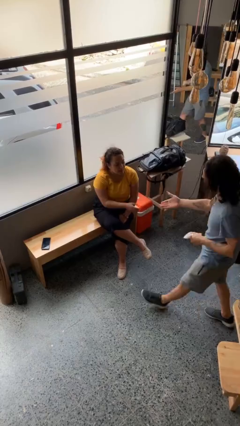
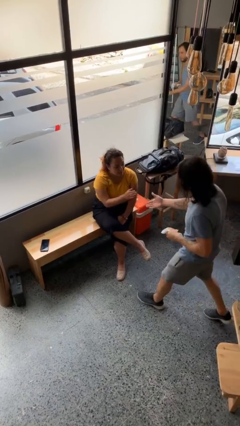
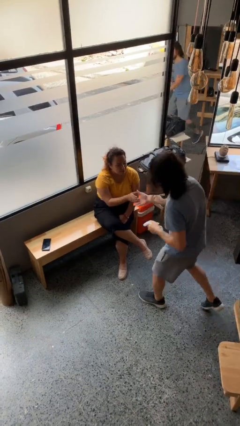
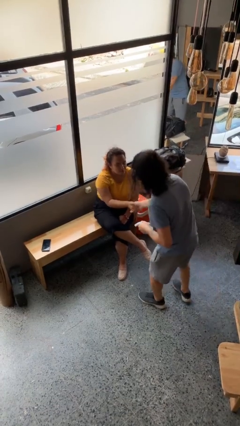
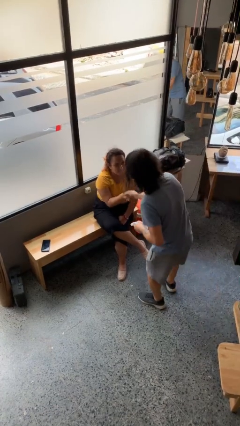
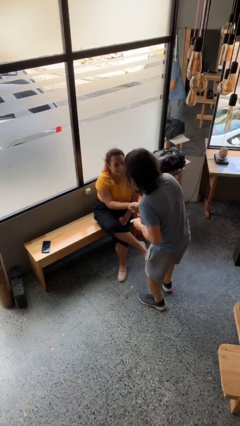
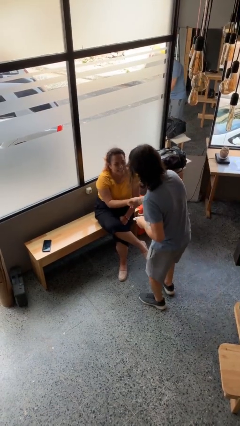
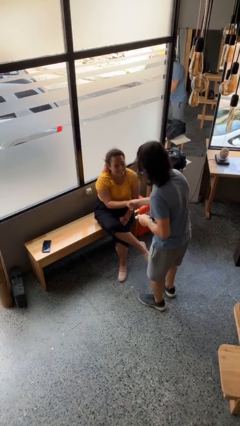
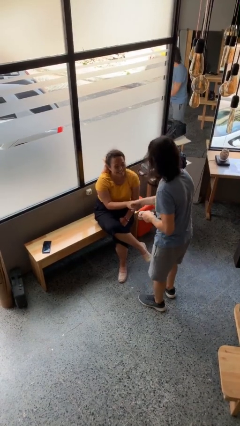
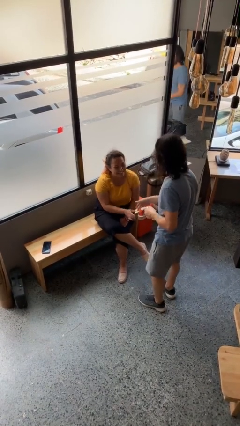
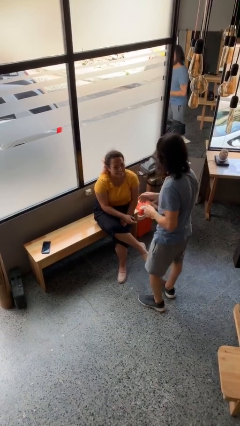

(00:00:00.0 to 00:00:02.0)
person shakes hand

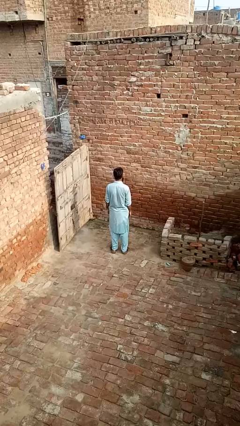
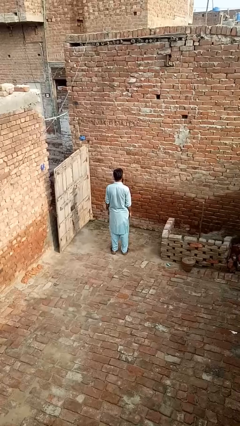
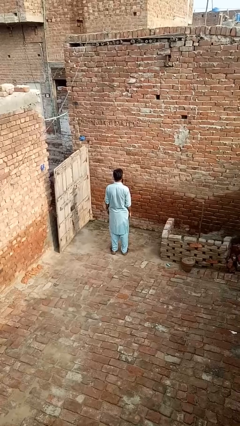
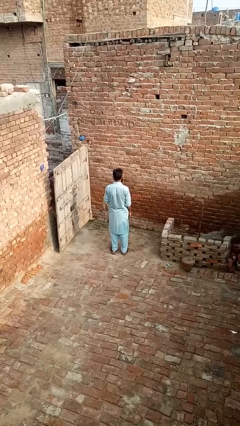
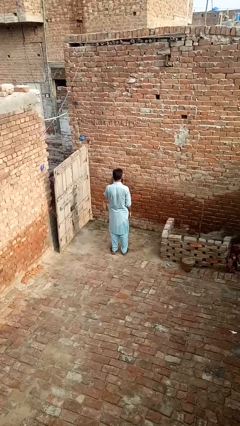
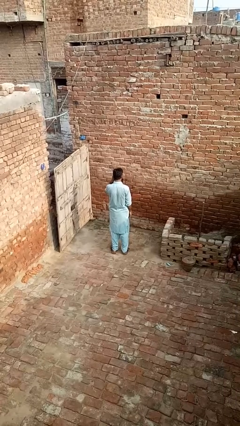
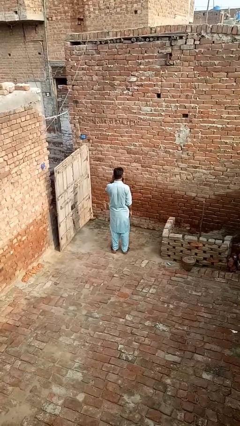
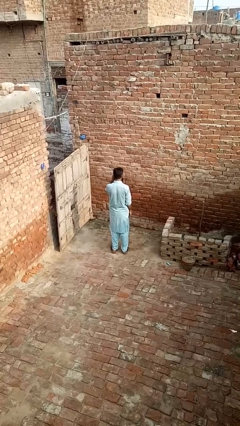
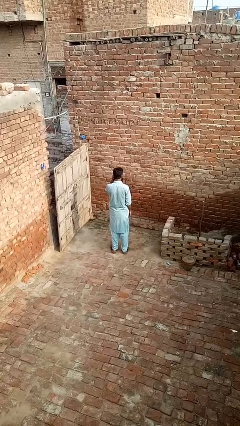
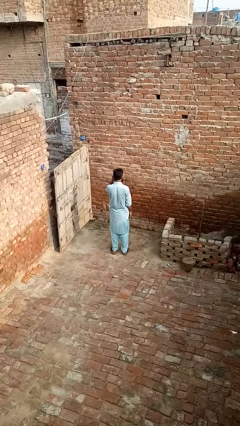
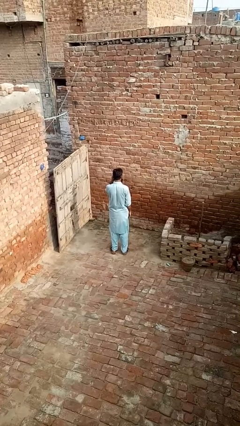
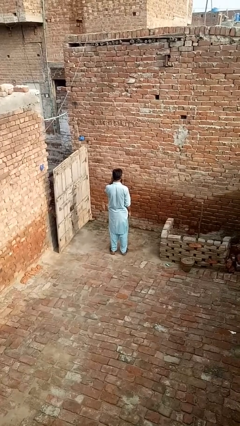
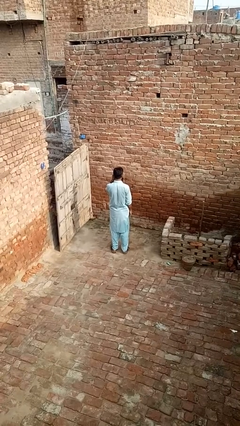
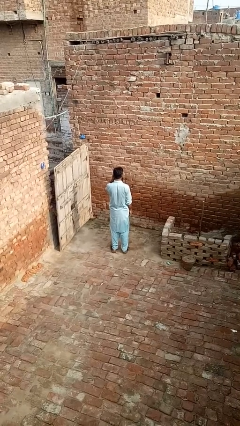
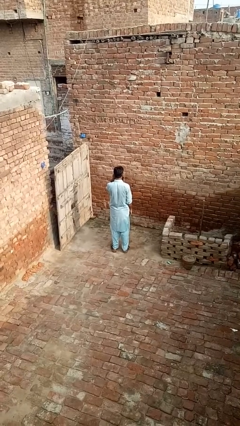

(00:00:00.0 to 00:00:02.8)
person touches earlobe

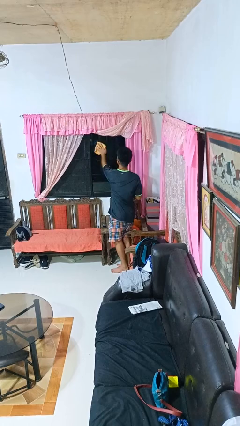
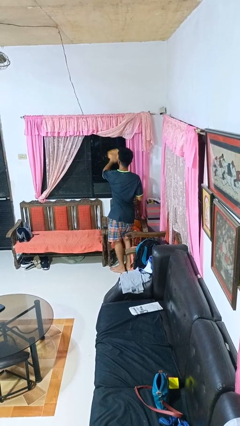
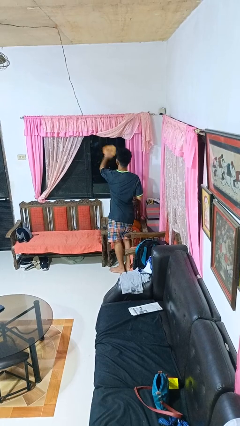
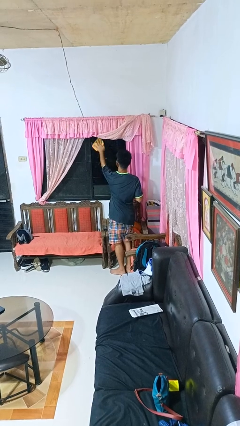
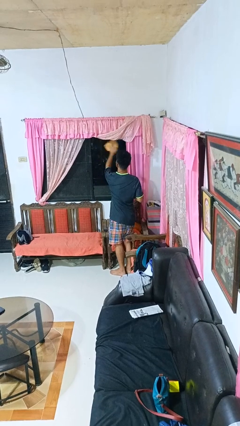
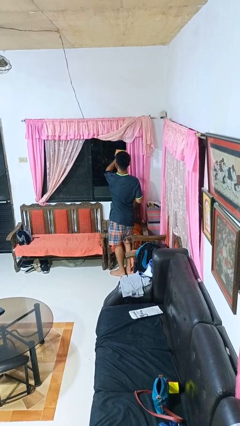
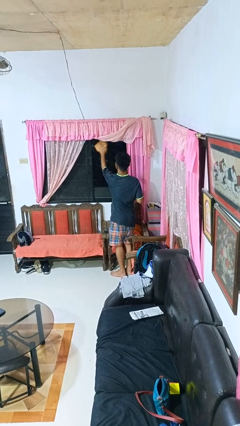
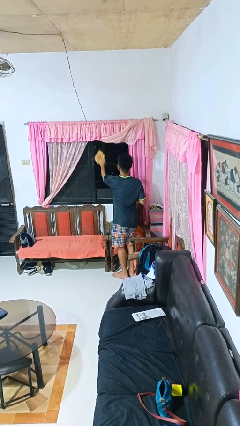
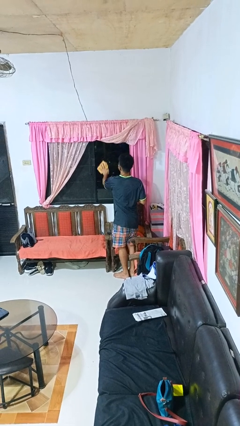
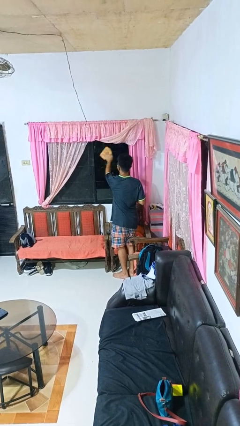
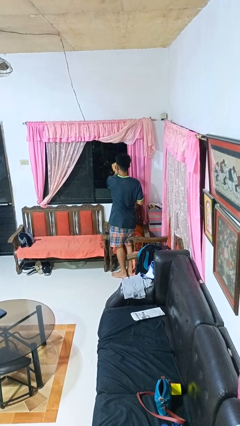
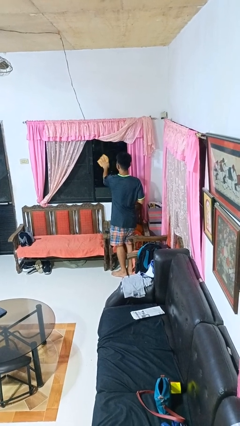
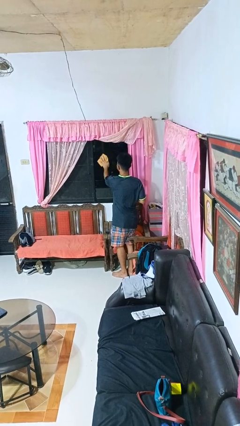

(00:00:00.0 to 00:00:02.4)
person washes window

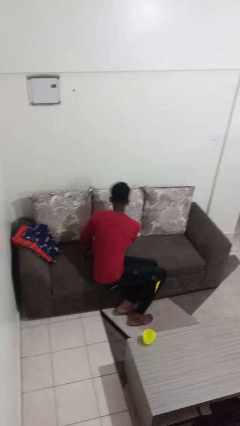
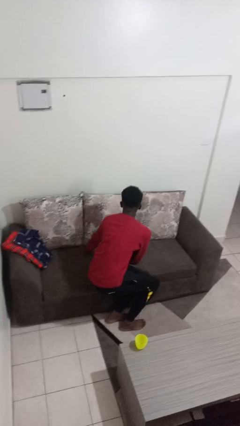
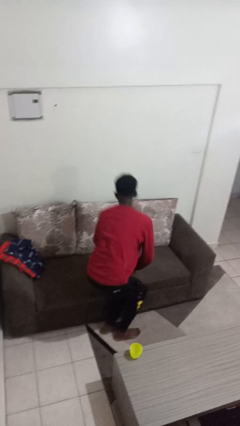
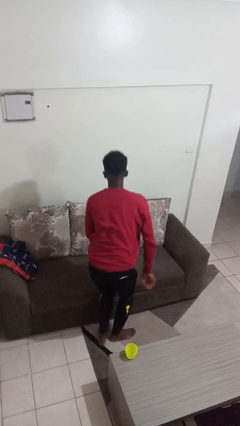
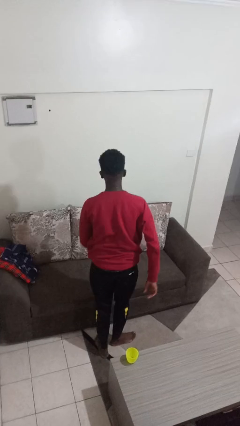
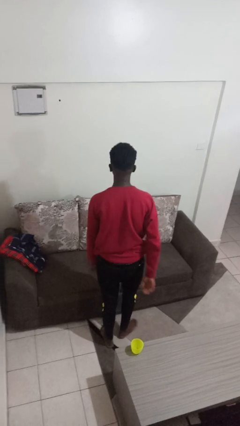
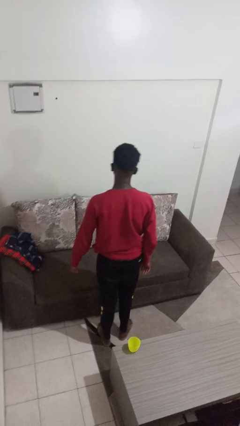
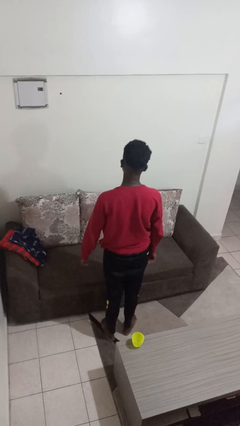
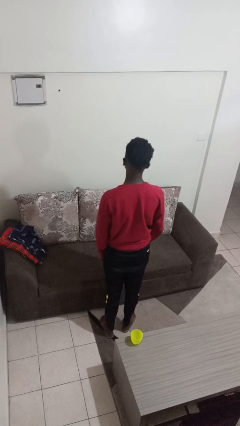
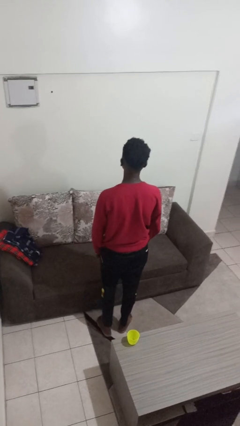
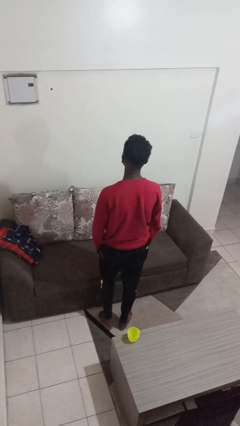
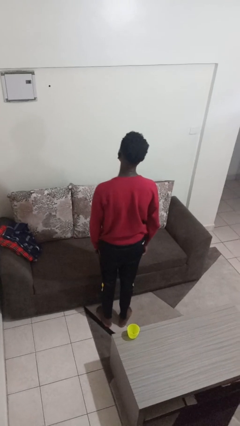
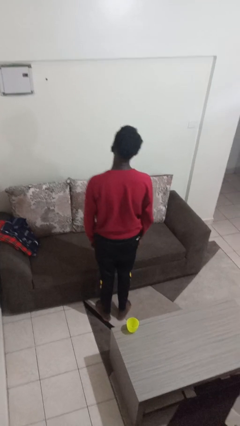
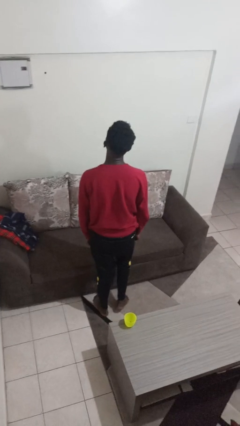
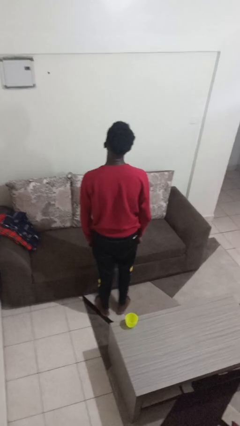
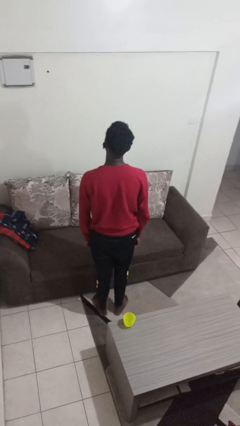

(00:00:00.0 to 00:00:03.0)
person stands up

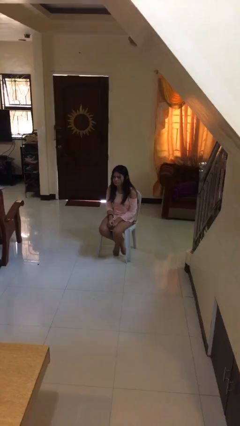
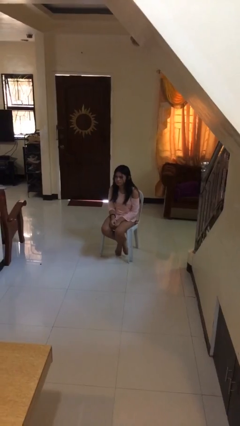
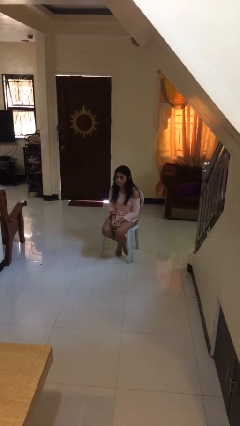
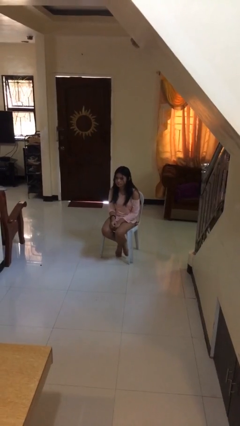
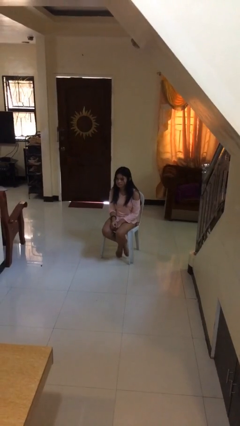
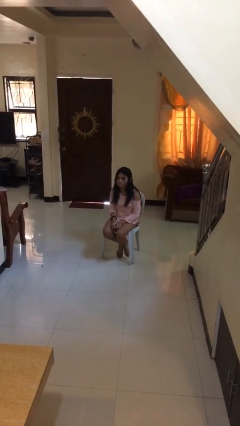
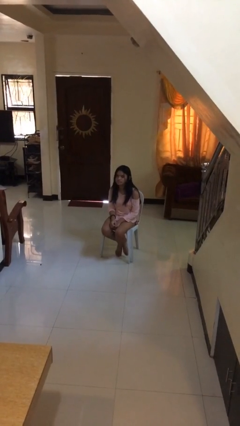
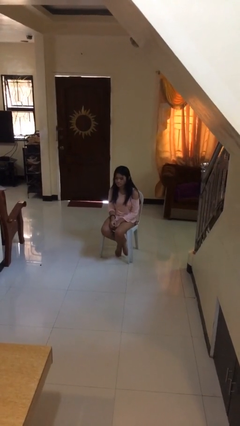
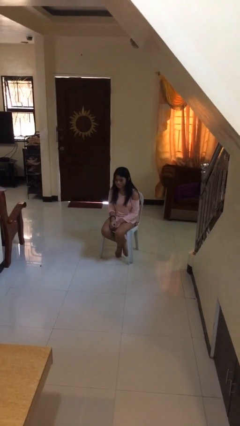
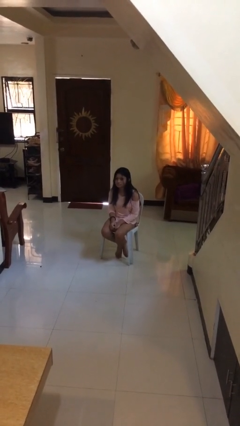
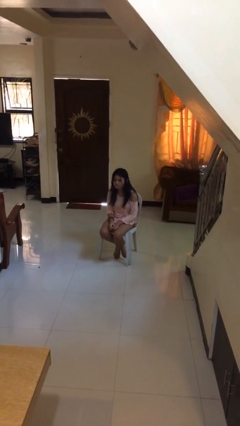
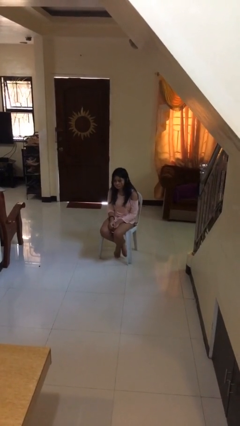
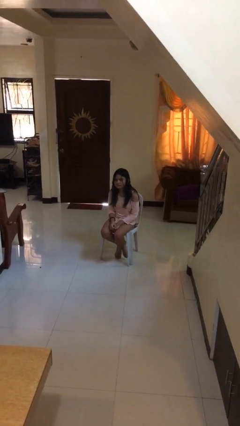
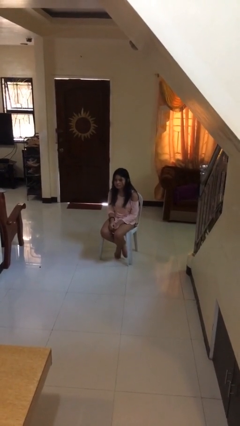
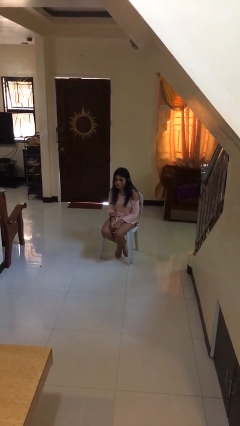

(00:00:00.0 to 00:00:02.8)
person nods head

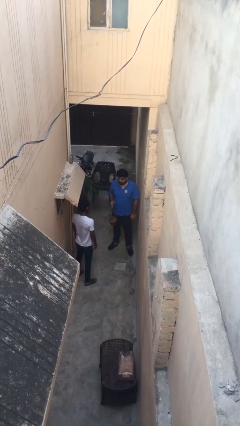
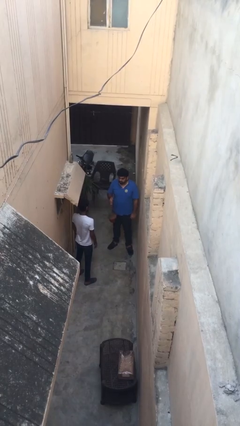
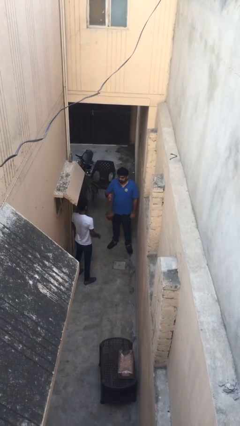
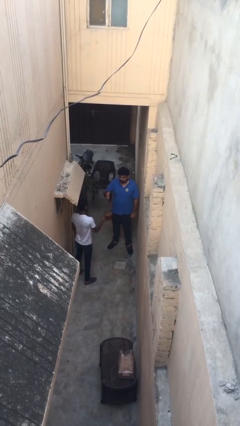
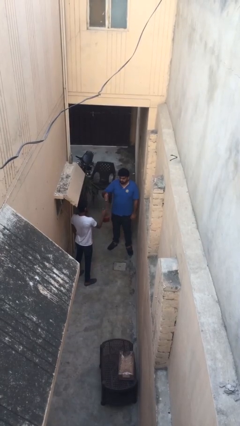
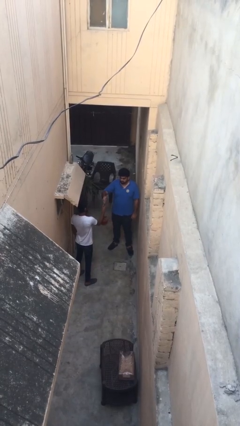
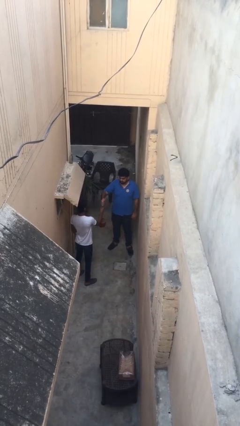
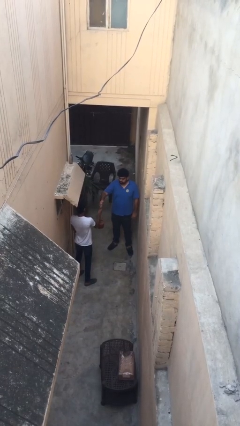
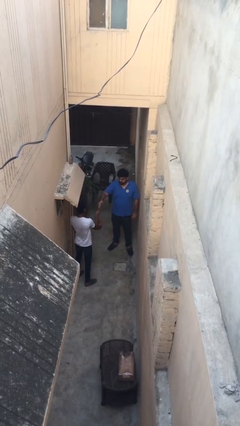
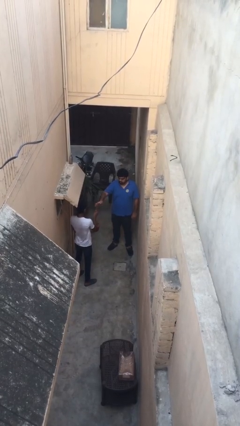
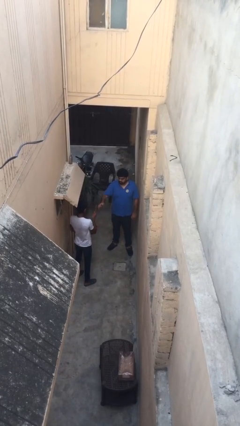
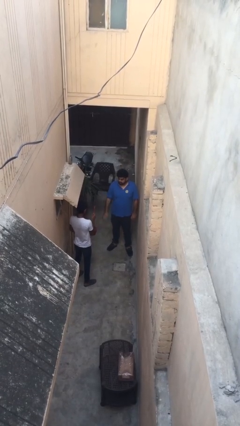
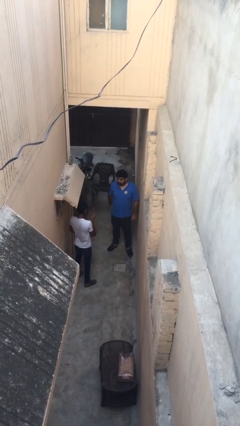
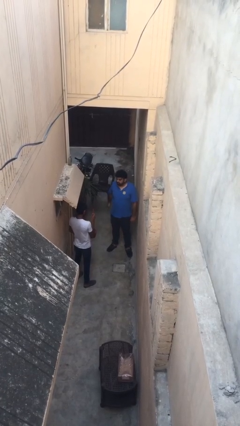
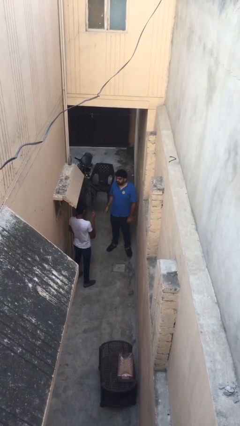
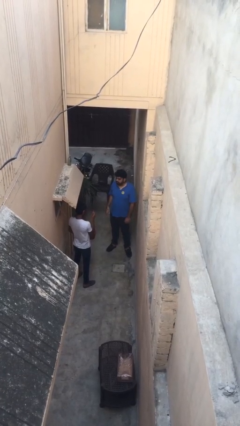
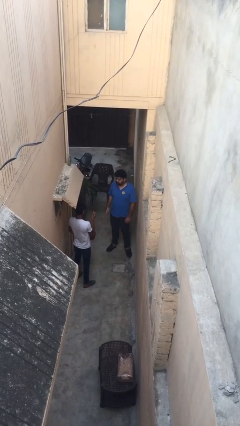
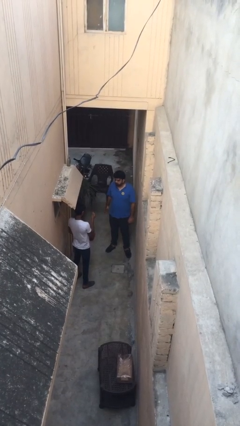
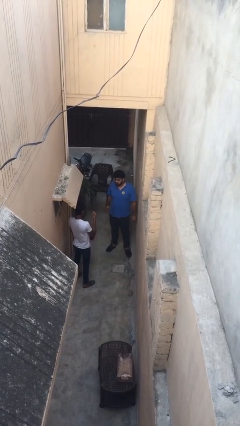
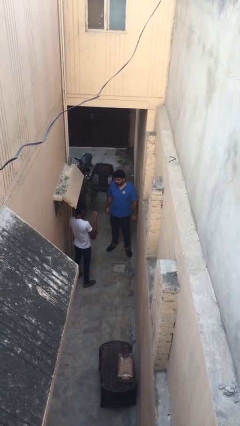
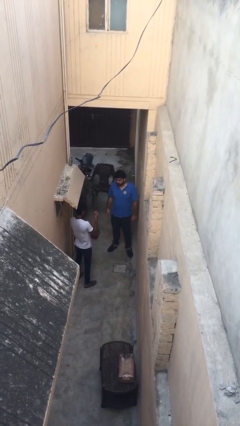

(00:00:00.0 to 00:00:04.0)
person transfers object to person

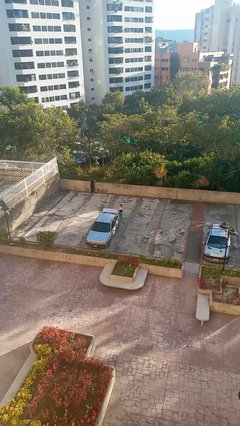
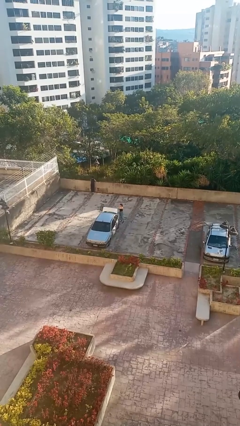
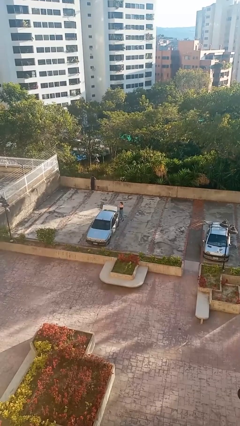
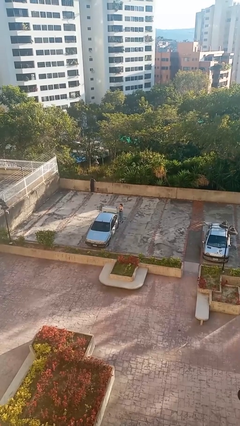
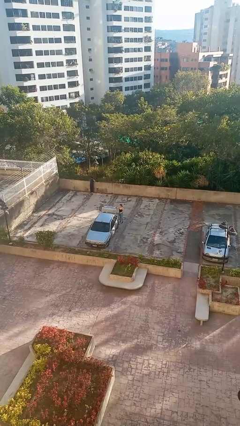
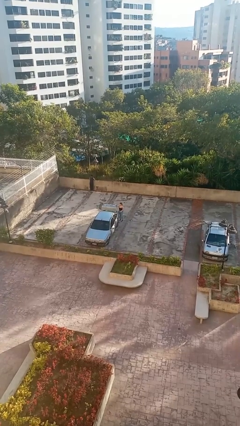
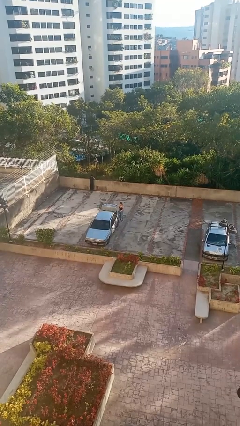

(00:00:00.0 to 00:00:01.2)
person opens car trunk
